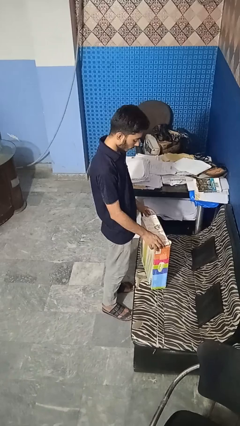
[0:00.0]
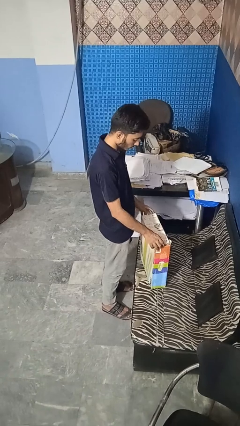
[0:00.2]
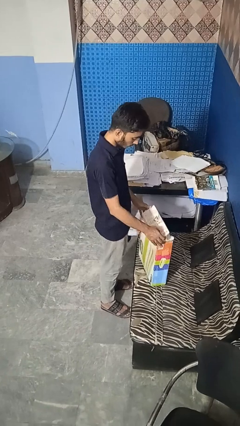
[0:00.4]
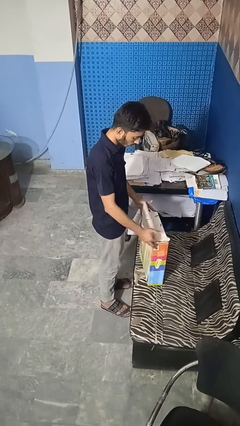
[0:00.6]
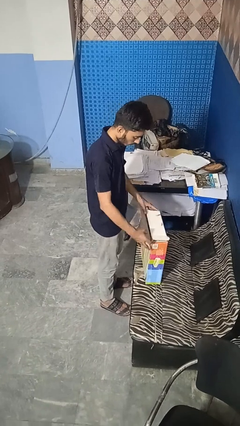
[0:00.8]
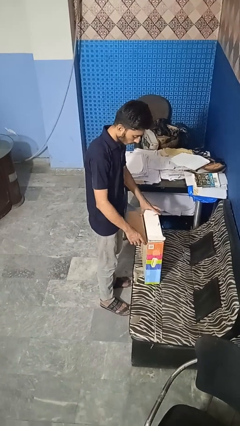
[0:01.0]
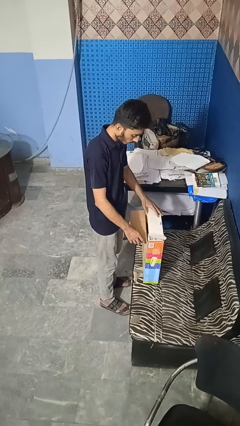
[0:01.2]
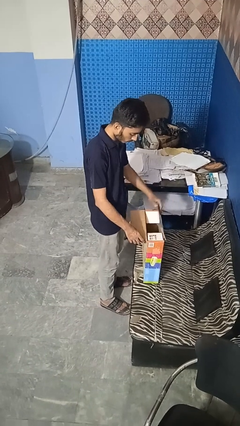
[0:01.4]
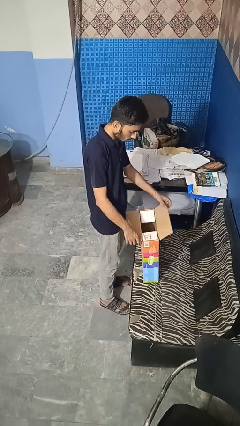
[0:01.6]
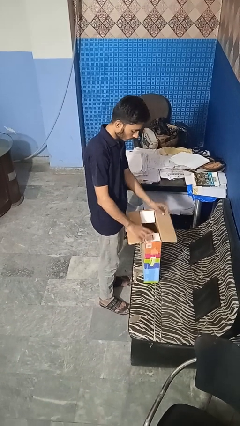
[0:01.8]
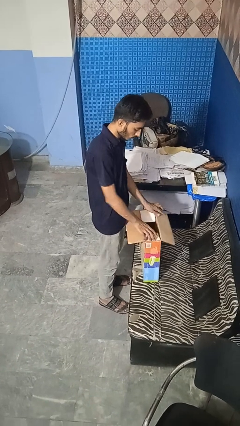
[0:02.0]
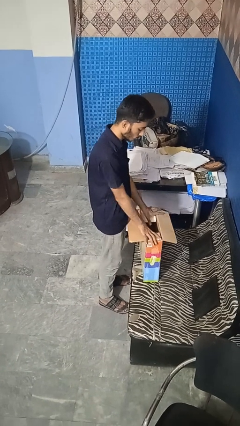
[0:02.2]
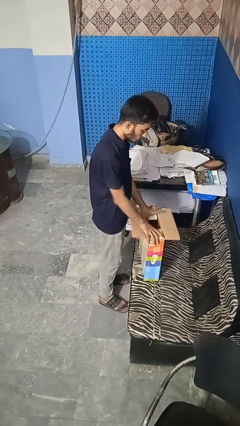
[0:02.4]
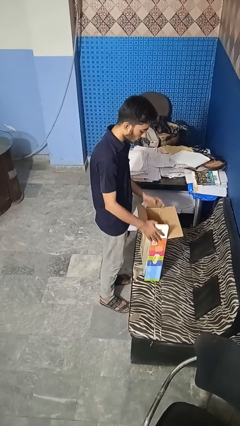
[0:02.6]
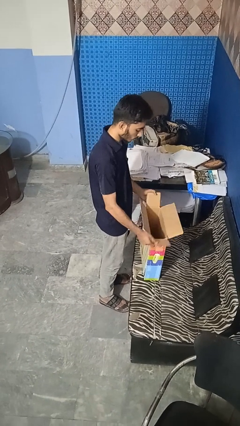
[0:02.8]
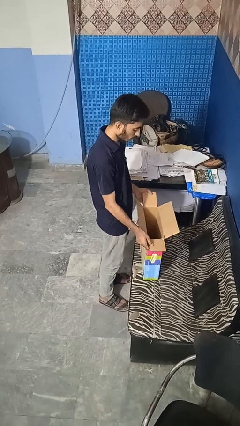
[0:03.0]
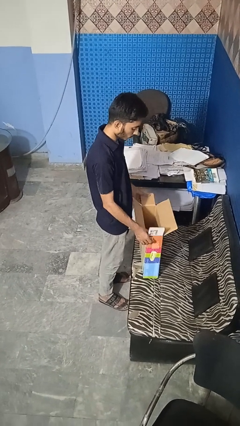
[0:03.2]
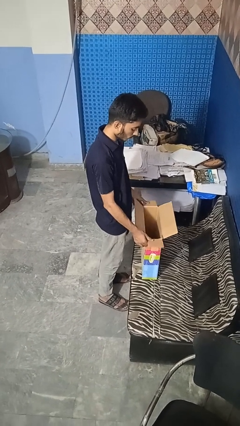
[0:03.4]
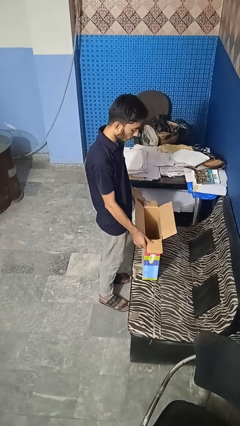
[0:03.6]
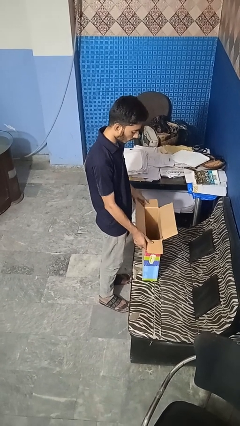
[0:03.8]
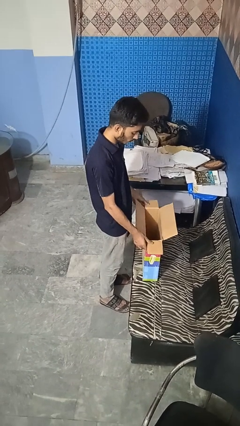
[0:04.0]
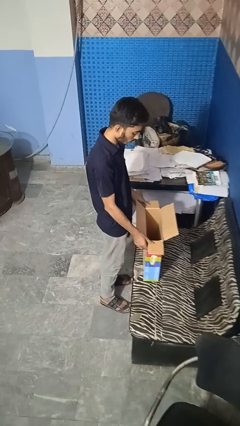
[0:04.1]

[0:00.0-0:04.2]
person opens box

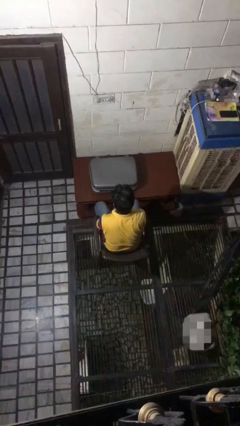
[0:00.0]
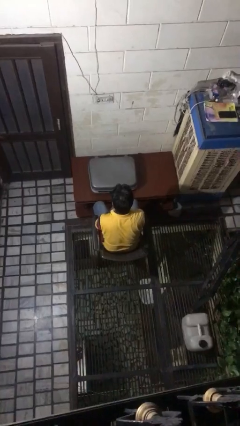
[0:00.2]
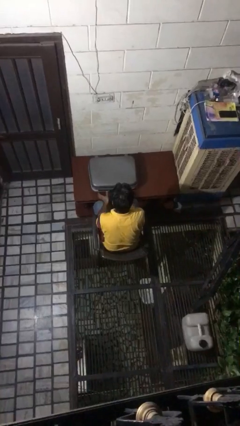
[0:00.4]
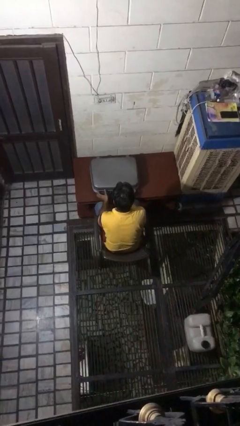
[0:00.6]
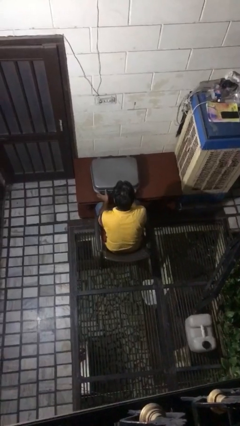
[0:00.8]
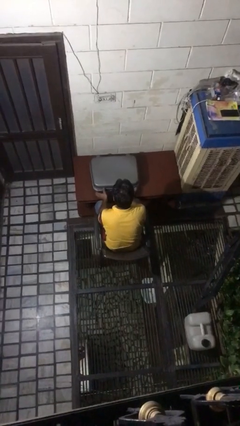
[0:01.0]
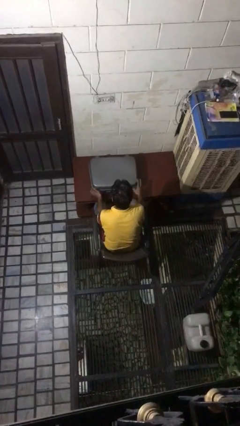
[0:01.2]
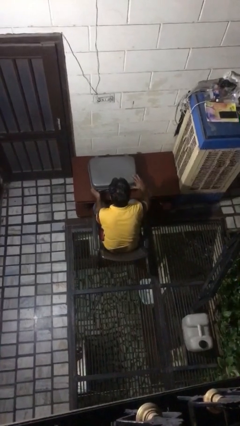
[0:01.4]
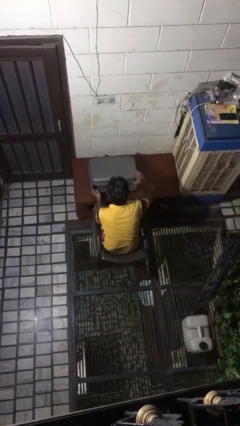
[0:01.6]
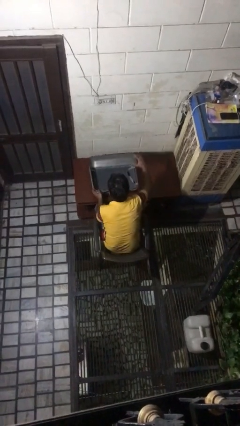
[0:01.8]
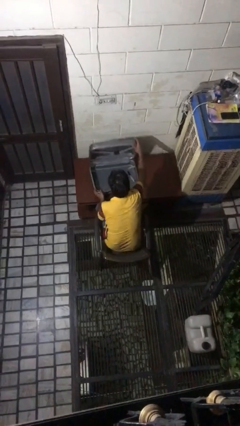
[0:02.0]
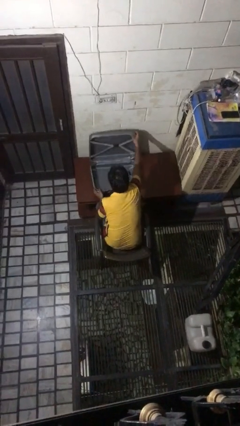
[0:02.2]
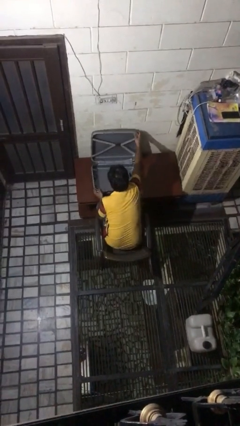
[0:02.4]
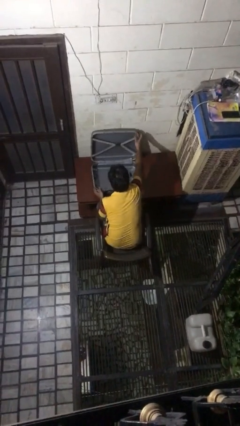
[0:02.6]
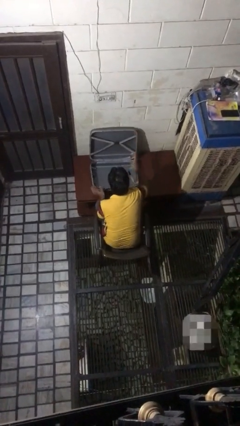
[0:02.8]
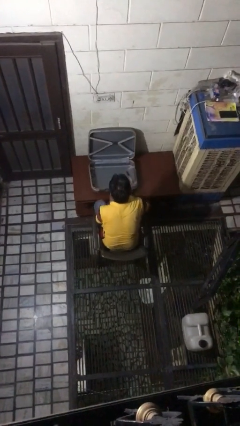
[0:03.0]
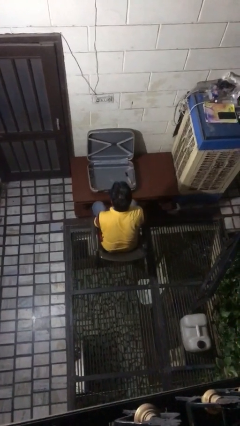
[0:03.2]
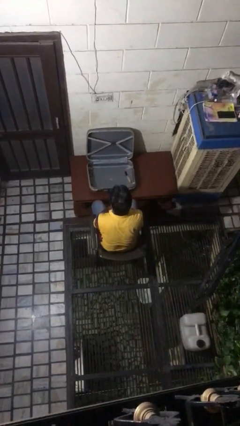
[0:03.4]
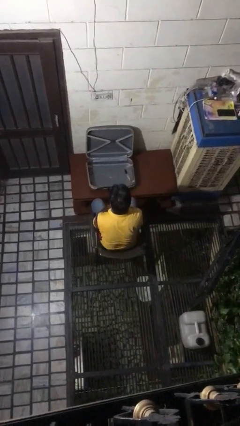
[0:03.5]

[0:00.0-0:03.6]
person opens suitcase

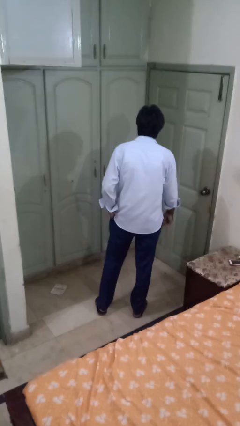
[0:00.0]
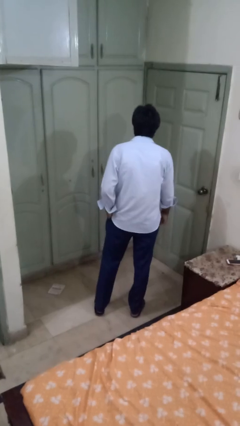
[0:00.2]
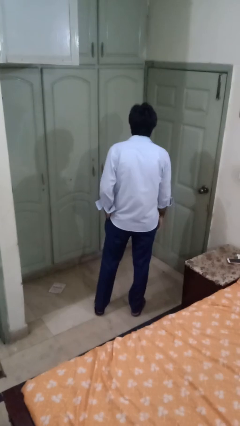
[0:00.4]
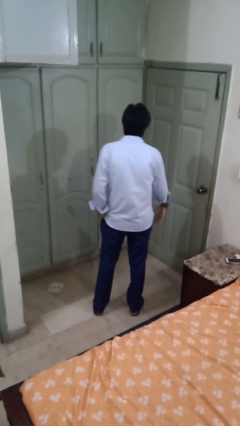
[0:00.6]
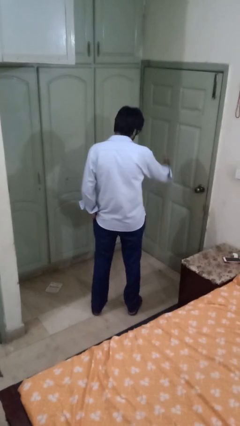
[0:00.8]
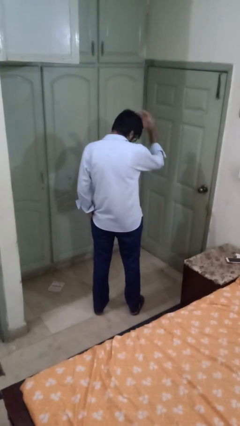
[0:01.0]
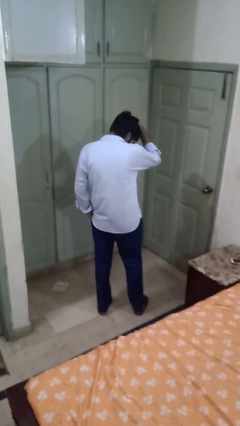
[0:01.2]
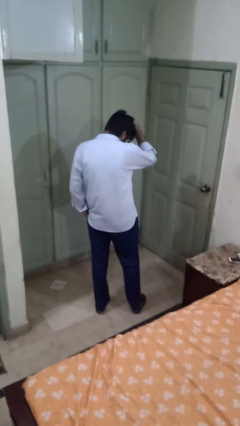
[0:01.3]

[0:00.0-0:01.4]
person pats head

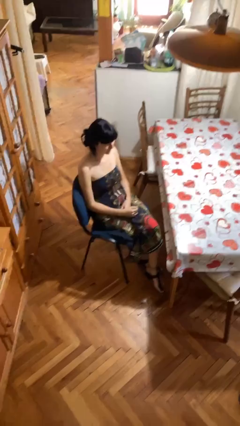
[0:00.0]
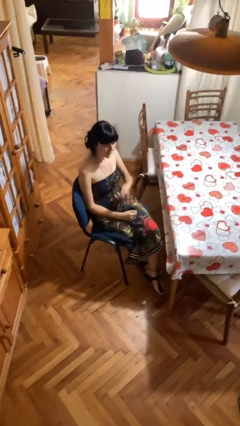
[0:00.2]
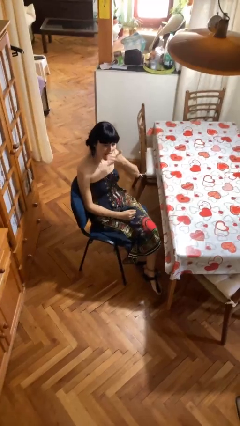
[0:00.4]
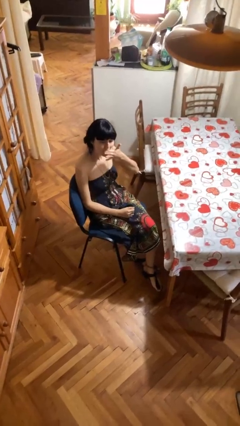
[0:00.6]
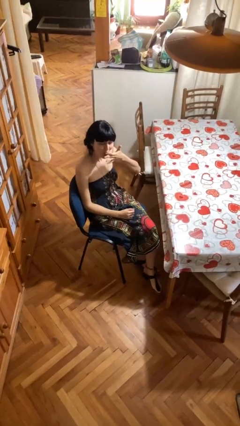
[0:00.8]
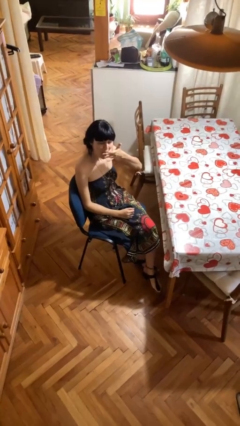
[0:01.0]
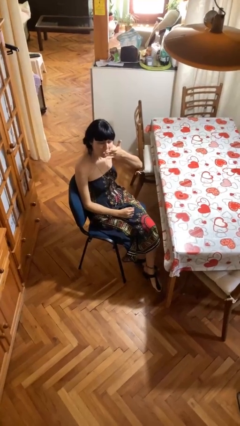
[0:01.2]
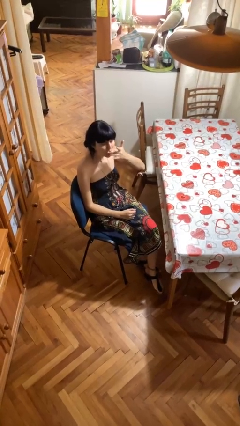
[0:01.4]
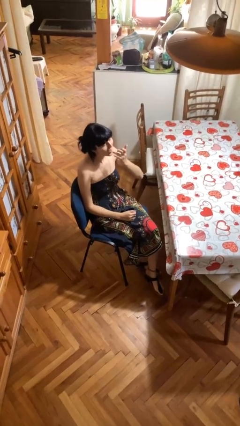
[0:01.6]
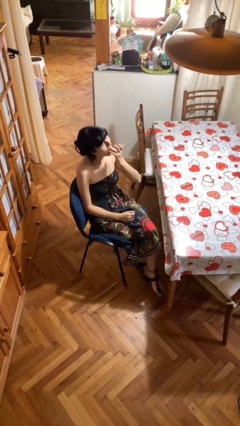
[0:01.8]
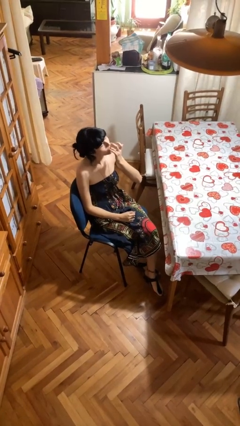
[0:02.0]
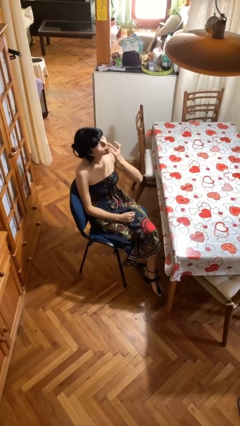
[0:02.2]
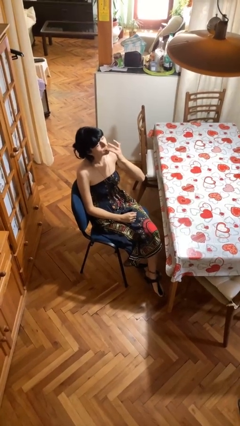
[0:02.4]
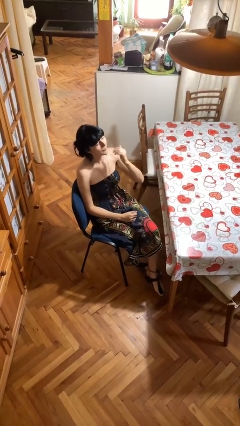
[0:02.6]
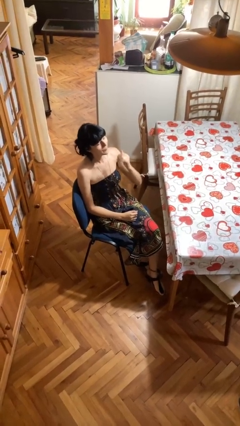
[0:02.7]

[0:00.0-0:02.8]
person licks fingers

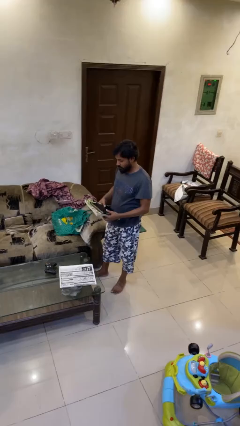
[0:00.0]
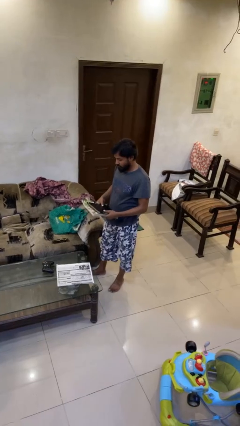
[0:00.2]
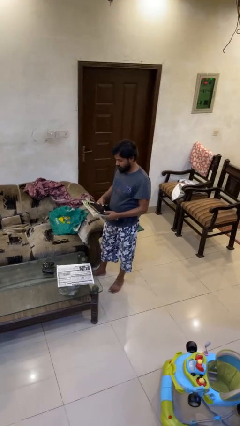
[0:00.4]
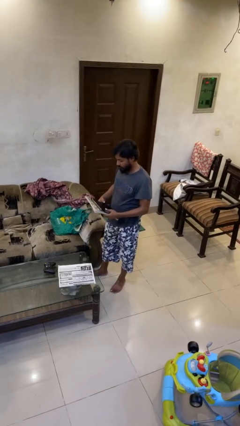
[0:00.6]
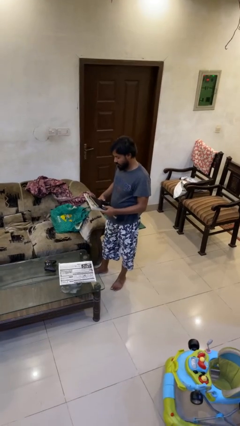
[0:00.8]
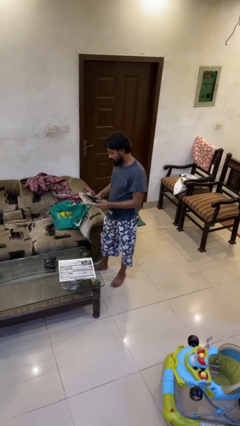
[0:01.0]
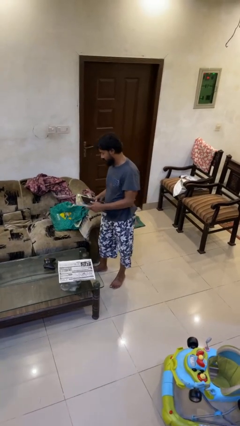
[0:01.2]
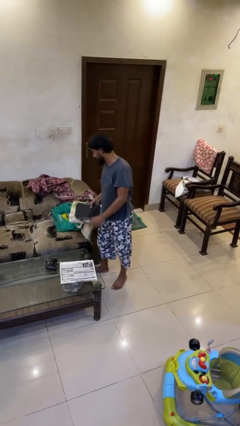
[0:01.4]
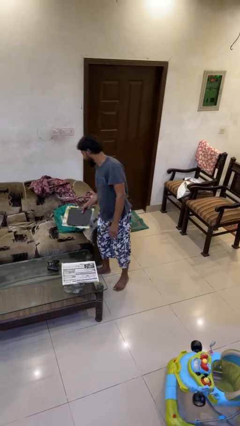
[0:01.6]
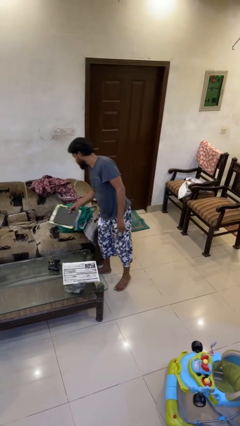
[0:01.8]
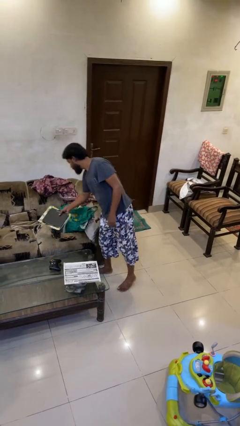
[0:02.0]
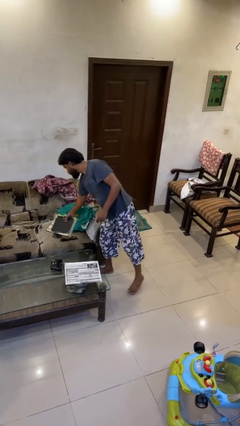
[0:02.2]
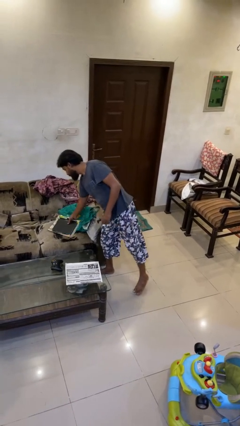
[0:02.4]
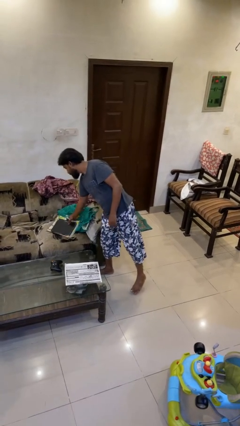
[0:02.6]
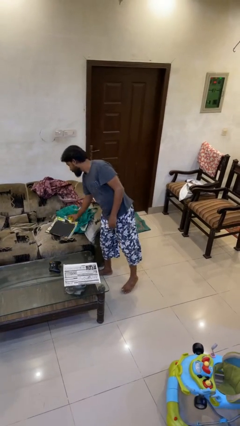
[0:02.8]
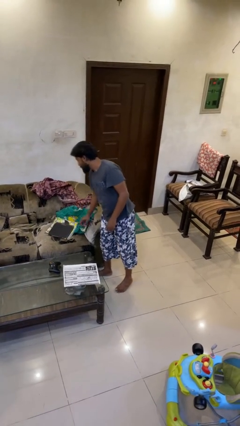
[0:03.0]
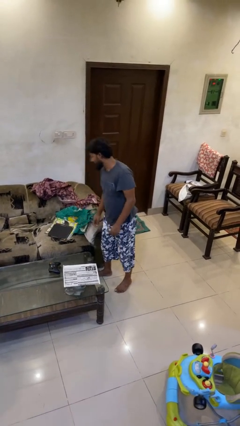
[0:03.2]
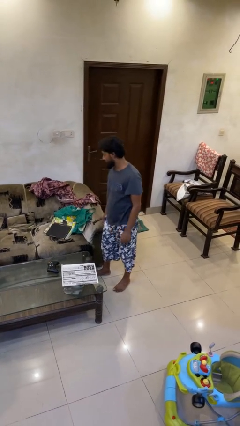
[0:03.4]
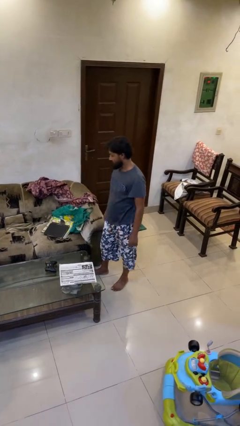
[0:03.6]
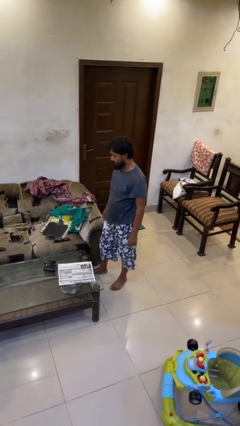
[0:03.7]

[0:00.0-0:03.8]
person puts down object on couch

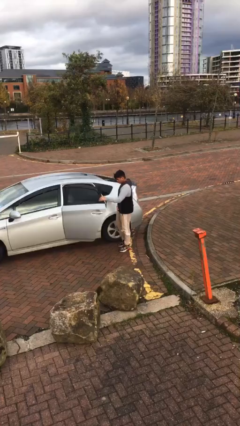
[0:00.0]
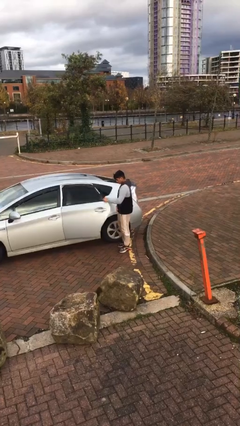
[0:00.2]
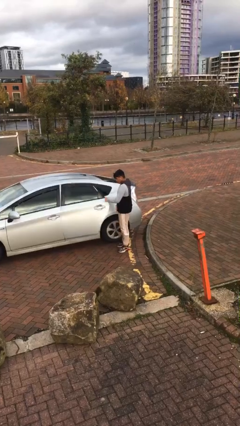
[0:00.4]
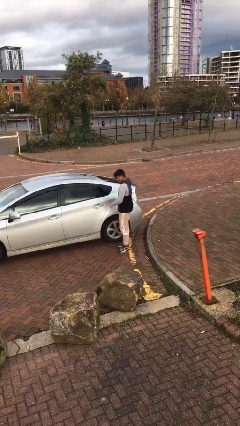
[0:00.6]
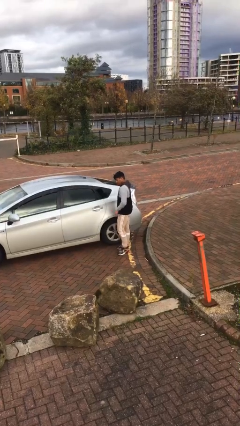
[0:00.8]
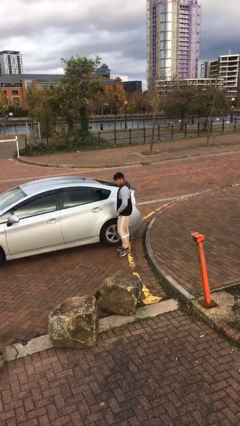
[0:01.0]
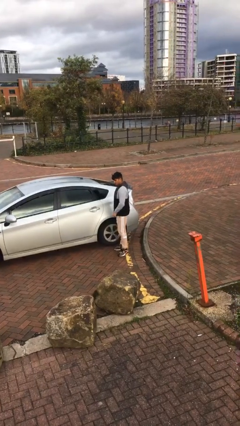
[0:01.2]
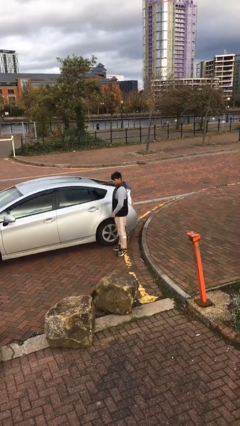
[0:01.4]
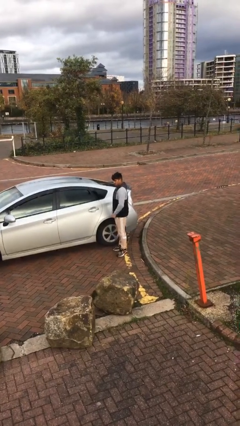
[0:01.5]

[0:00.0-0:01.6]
person closes car door
